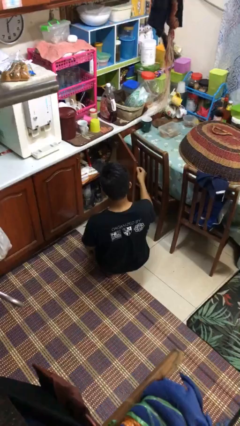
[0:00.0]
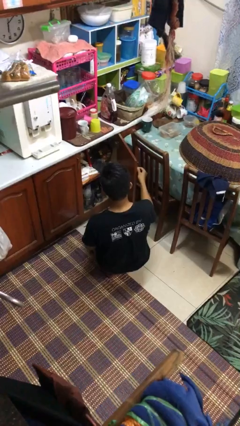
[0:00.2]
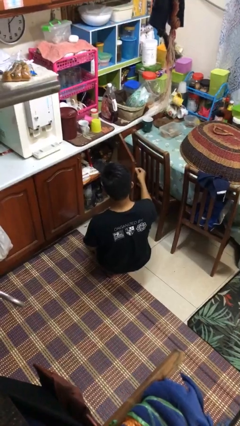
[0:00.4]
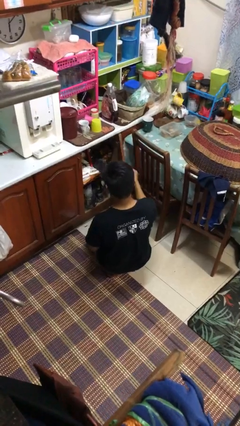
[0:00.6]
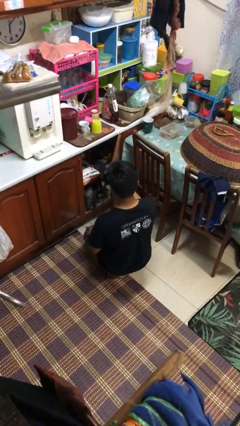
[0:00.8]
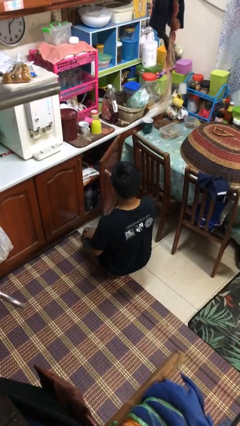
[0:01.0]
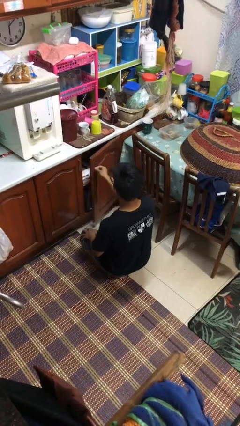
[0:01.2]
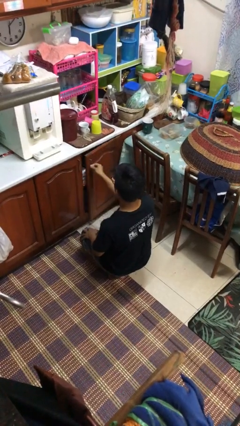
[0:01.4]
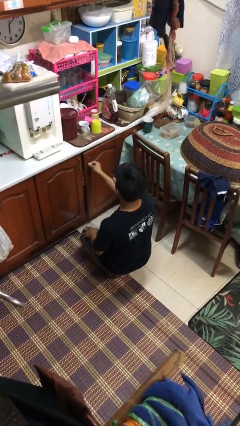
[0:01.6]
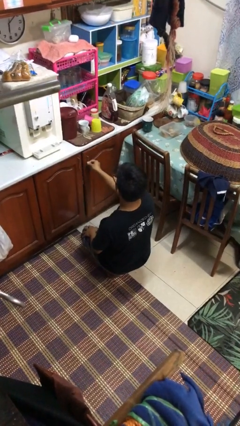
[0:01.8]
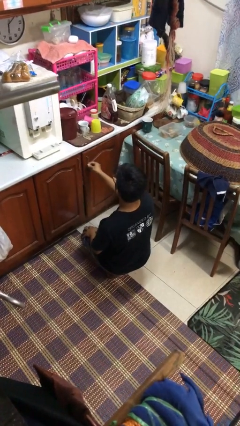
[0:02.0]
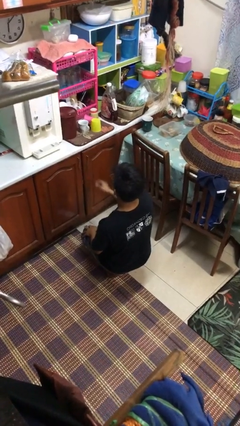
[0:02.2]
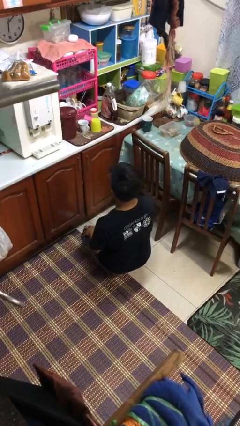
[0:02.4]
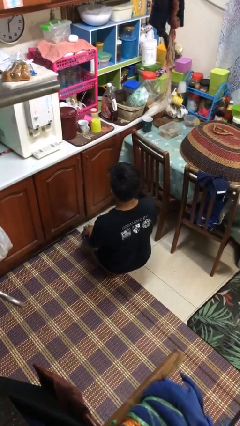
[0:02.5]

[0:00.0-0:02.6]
person closes kitchen drawer

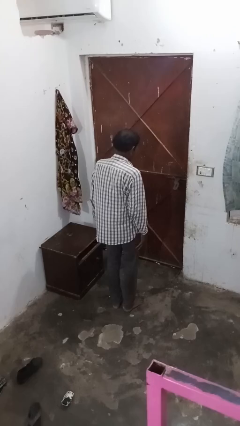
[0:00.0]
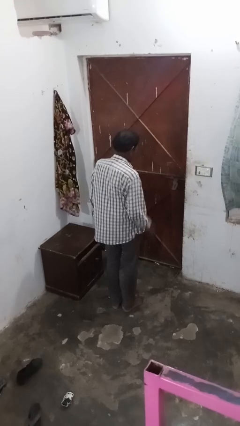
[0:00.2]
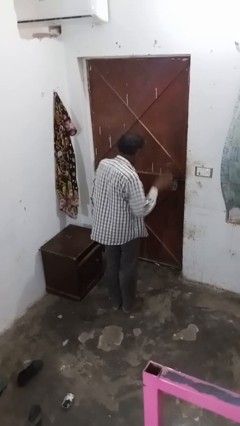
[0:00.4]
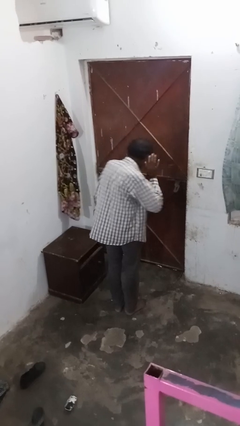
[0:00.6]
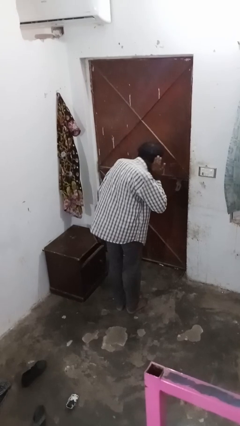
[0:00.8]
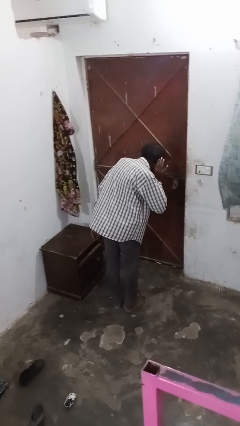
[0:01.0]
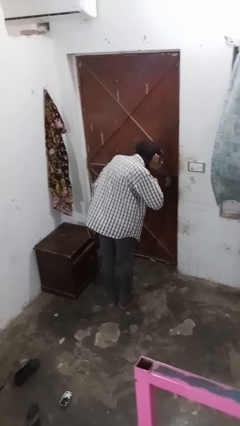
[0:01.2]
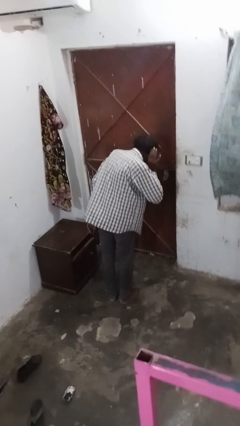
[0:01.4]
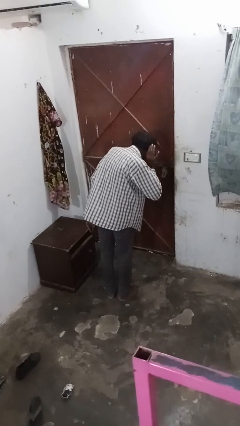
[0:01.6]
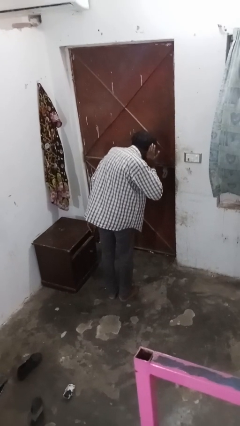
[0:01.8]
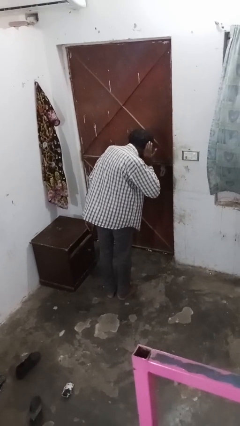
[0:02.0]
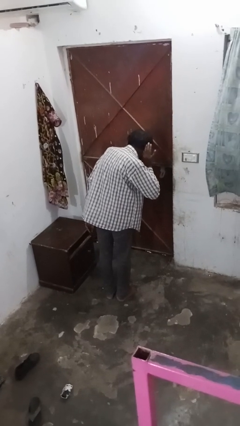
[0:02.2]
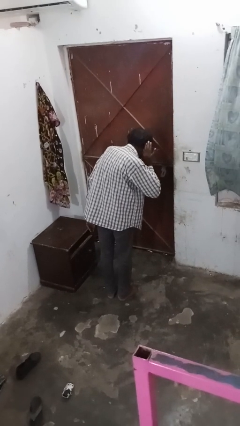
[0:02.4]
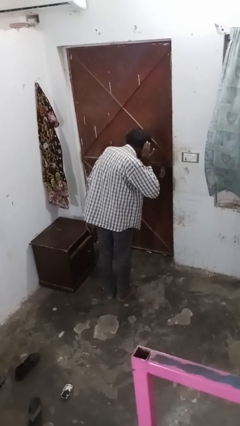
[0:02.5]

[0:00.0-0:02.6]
person gestures listen closely

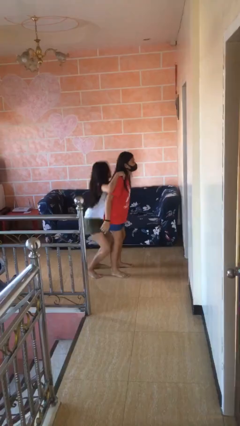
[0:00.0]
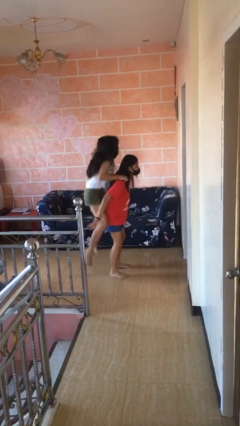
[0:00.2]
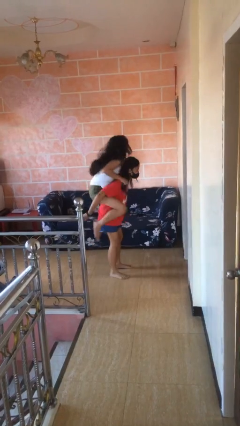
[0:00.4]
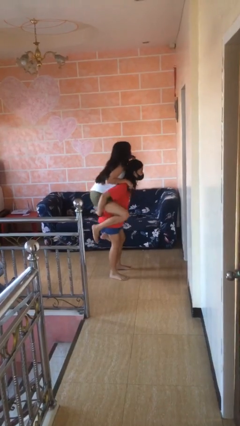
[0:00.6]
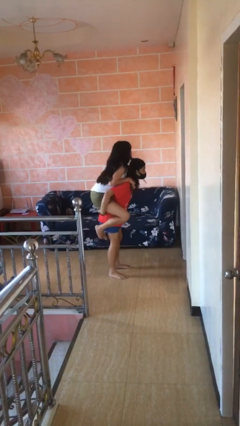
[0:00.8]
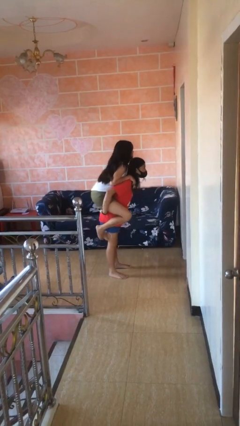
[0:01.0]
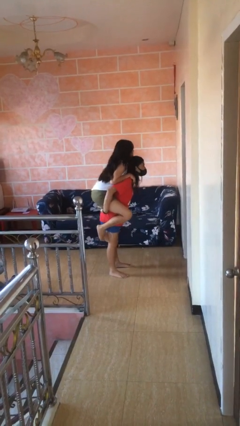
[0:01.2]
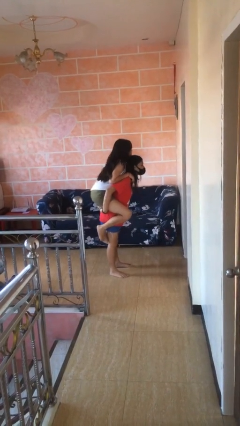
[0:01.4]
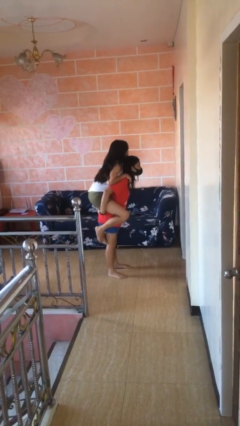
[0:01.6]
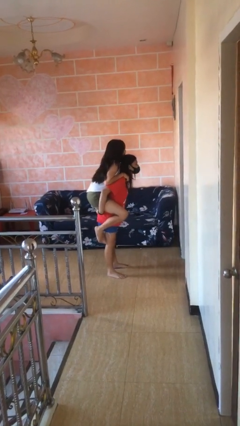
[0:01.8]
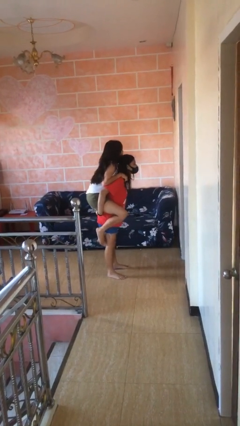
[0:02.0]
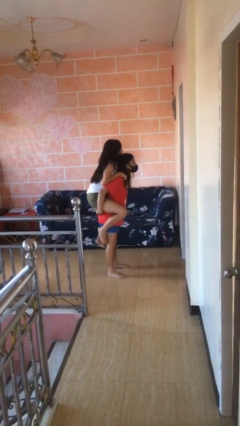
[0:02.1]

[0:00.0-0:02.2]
person carries person over shoulder

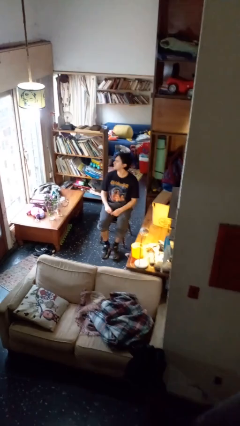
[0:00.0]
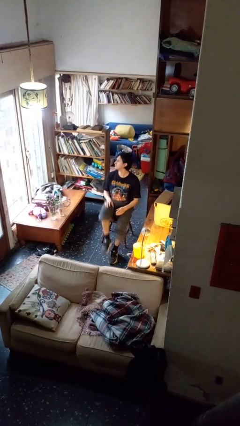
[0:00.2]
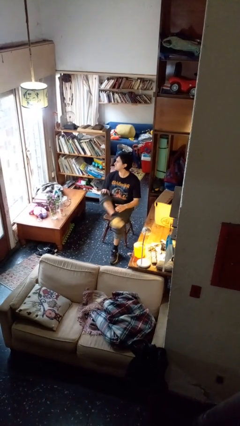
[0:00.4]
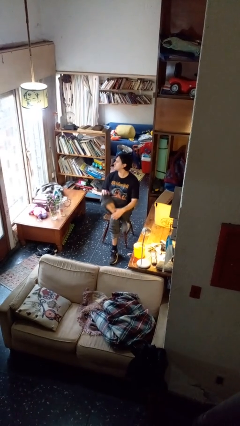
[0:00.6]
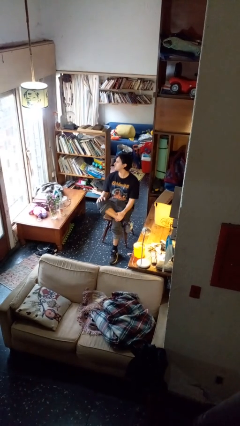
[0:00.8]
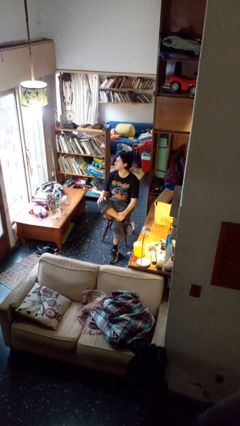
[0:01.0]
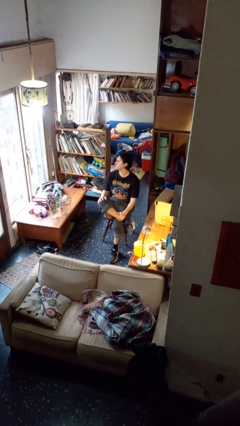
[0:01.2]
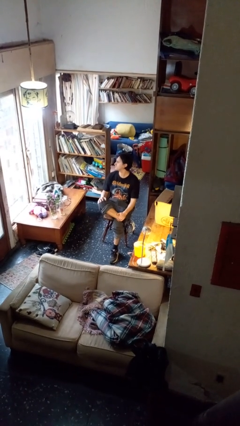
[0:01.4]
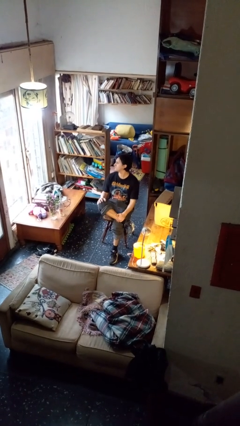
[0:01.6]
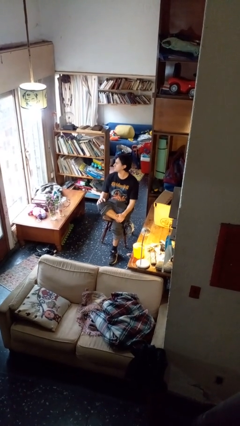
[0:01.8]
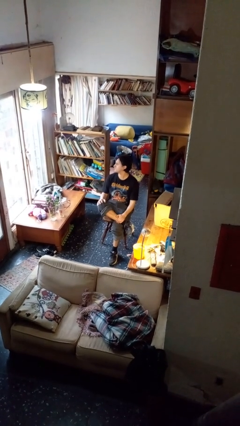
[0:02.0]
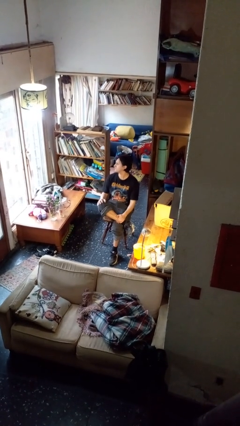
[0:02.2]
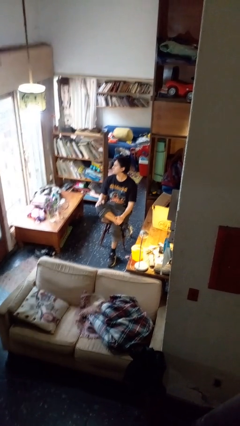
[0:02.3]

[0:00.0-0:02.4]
person crosses legs

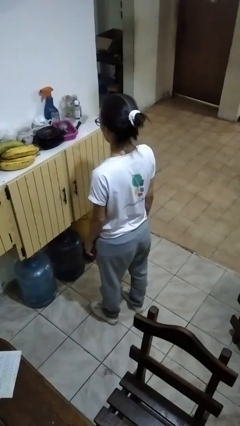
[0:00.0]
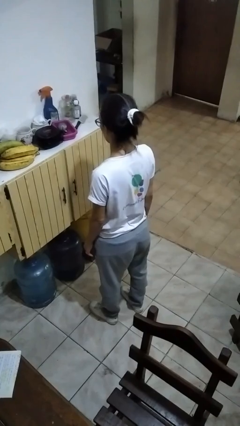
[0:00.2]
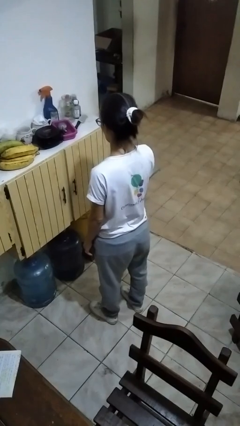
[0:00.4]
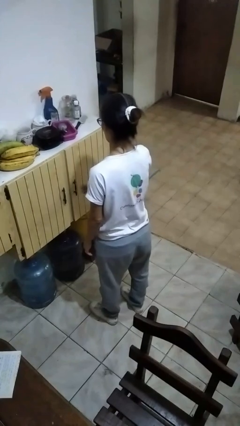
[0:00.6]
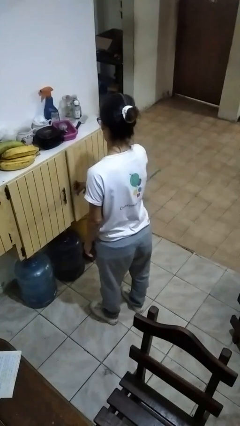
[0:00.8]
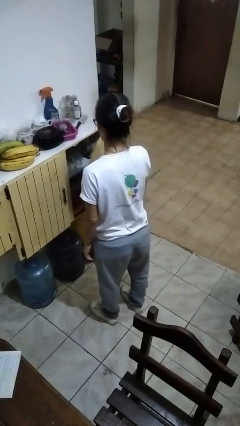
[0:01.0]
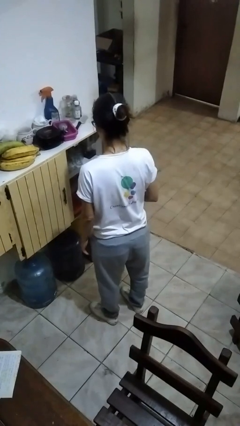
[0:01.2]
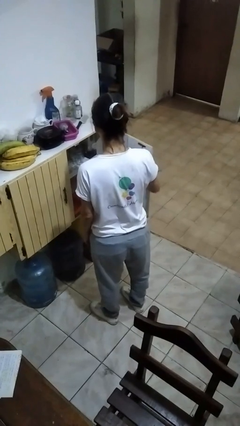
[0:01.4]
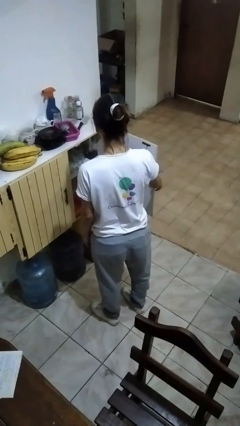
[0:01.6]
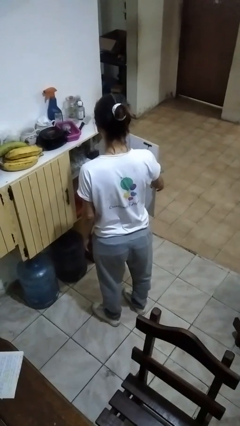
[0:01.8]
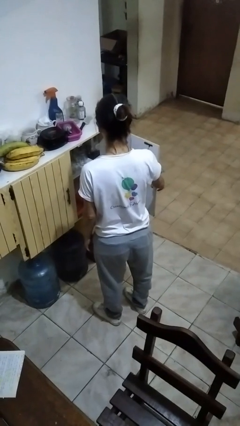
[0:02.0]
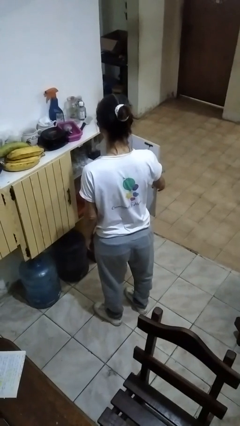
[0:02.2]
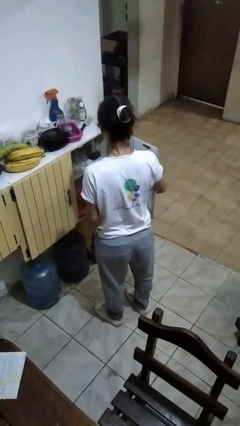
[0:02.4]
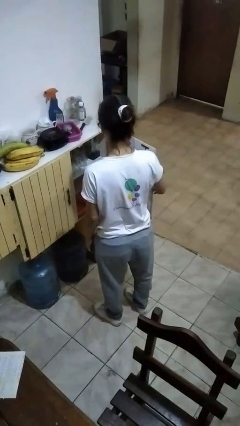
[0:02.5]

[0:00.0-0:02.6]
person opens kitchen drawer

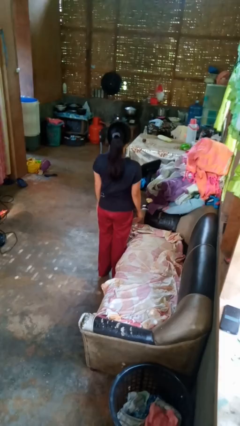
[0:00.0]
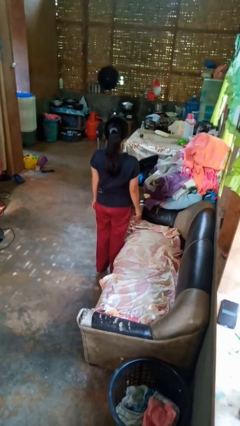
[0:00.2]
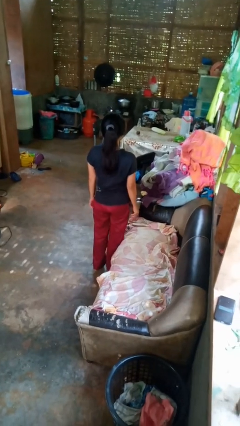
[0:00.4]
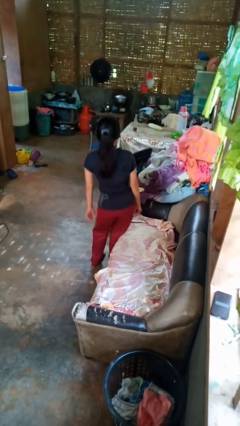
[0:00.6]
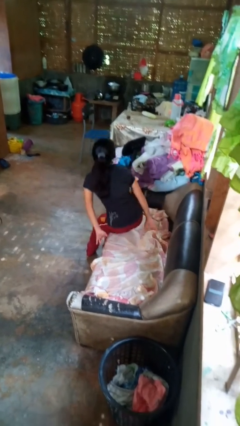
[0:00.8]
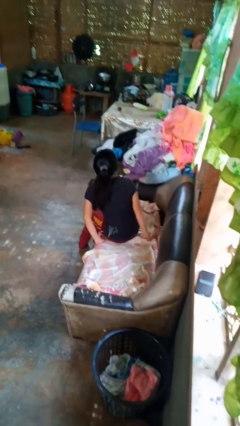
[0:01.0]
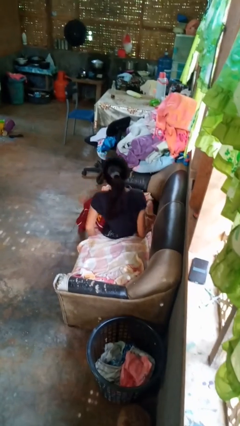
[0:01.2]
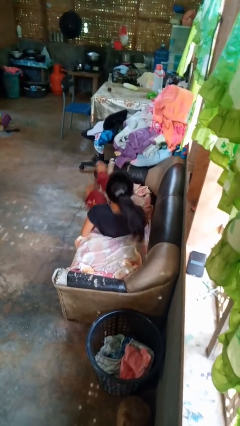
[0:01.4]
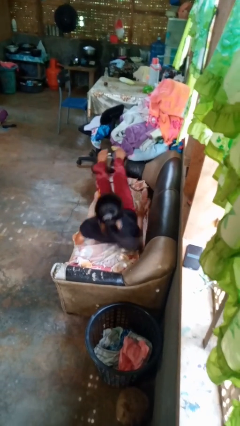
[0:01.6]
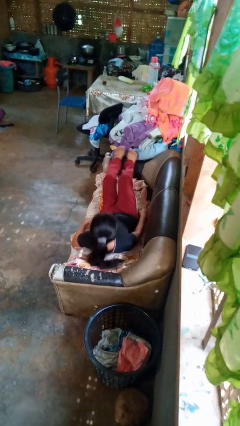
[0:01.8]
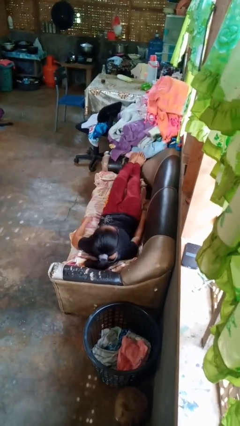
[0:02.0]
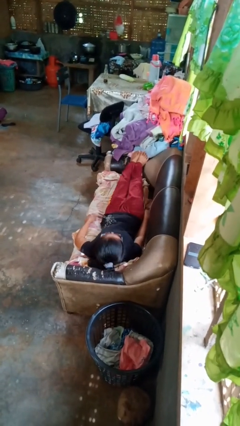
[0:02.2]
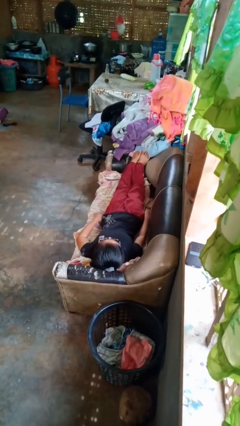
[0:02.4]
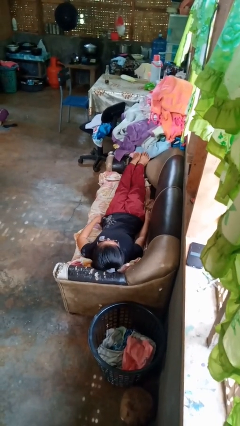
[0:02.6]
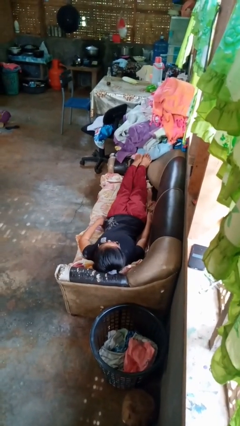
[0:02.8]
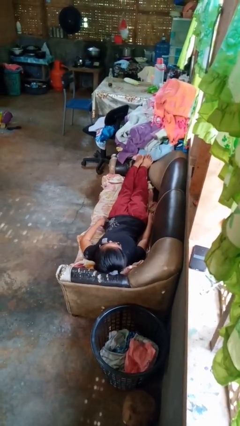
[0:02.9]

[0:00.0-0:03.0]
person lies down on couch

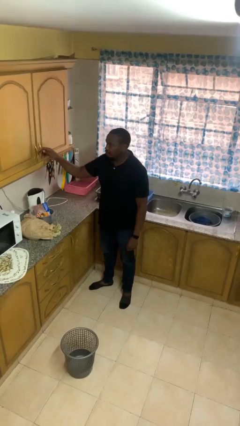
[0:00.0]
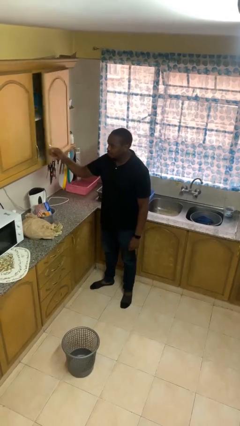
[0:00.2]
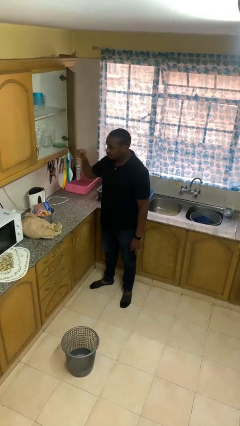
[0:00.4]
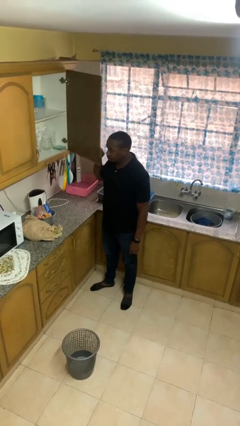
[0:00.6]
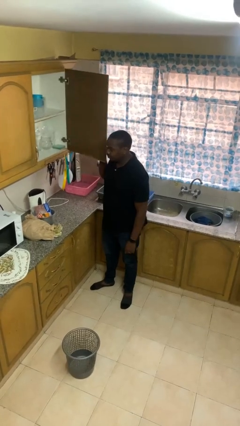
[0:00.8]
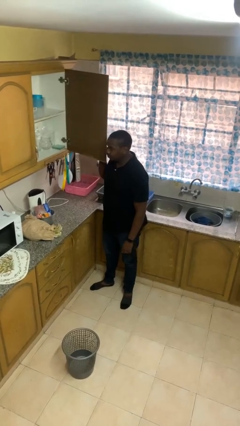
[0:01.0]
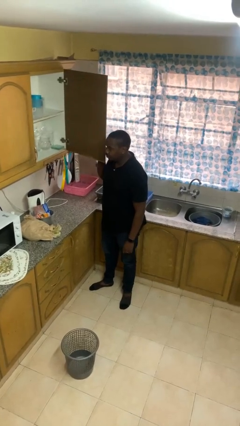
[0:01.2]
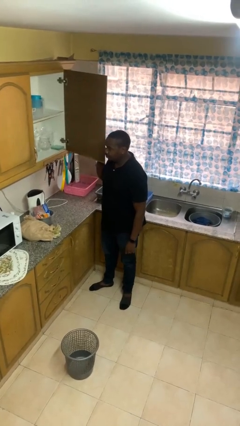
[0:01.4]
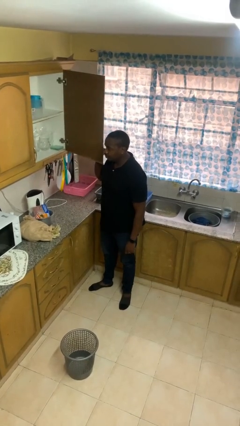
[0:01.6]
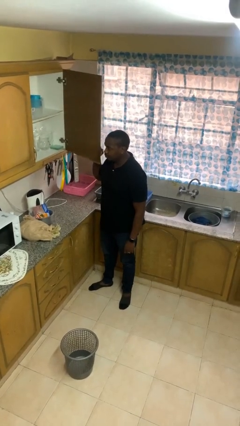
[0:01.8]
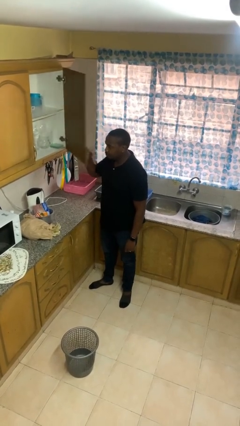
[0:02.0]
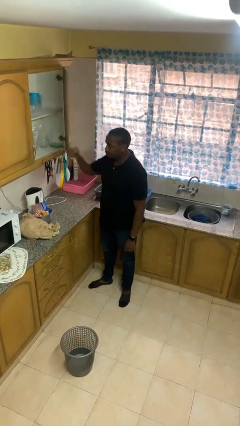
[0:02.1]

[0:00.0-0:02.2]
person opens cabinet
